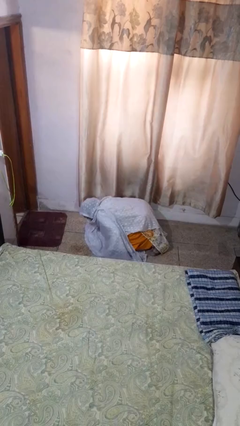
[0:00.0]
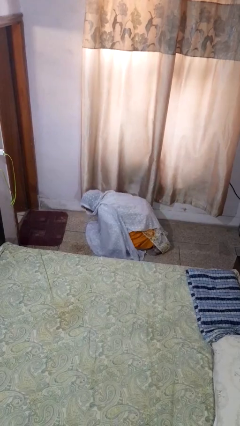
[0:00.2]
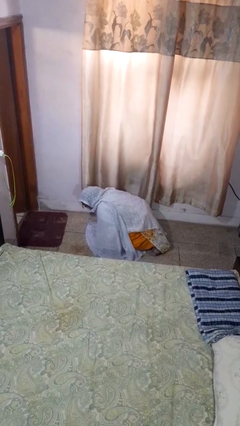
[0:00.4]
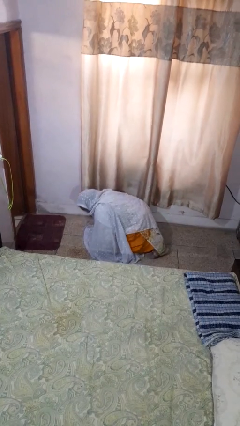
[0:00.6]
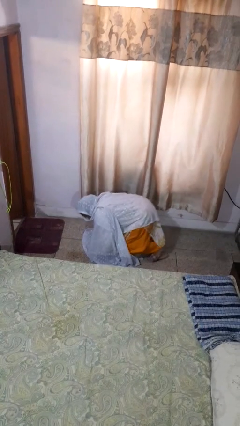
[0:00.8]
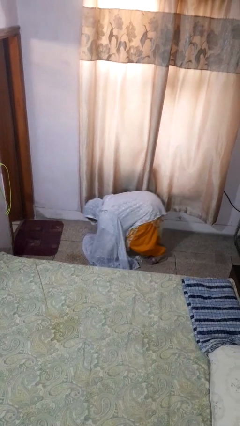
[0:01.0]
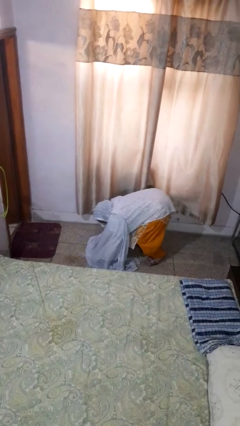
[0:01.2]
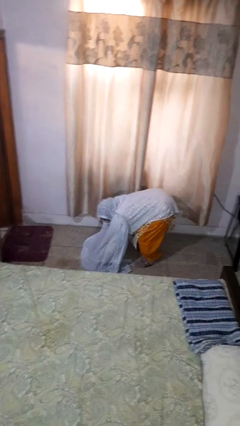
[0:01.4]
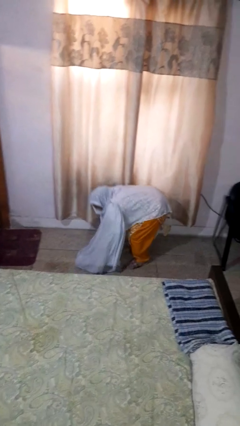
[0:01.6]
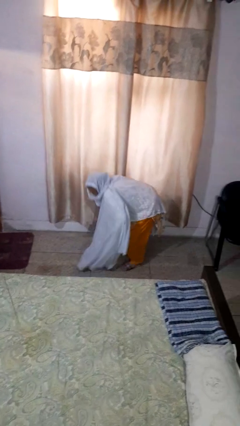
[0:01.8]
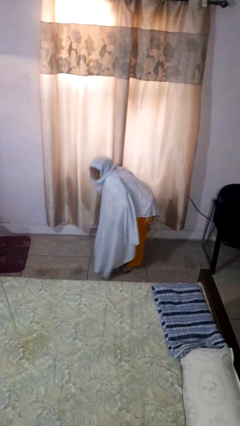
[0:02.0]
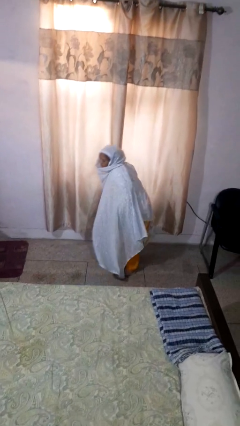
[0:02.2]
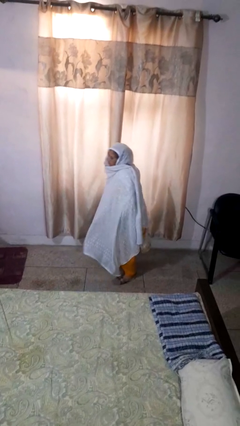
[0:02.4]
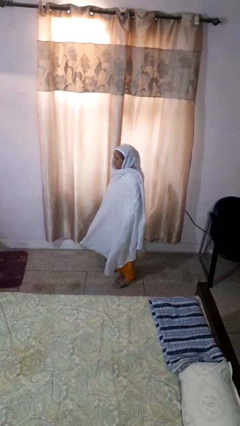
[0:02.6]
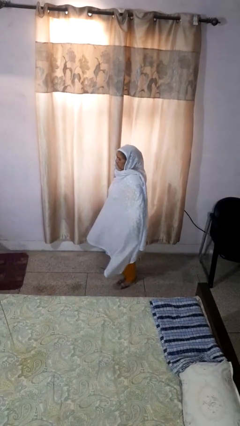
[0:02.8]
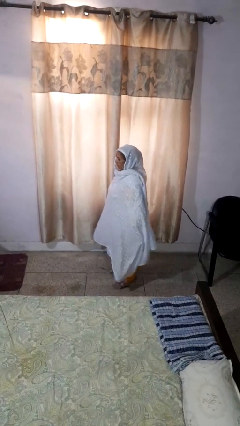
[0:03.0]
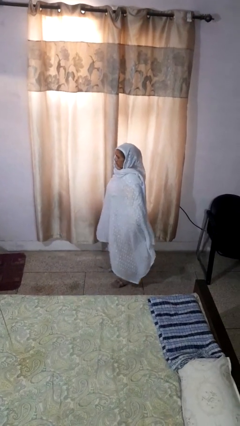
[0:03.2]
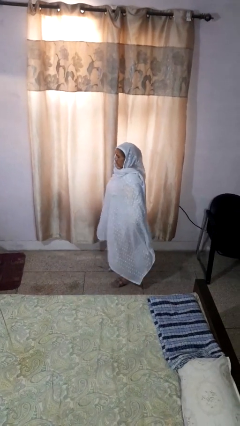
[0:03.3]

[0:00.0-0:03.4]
person stands up from floor

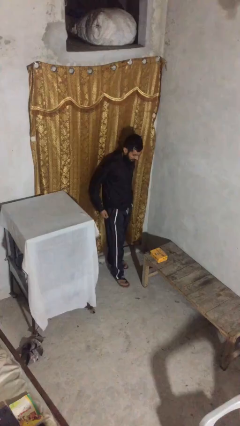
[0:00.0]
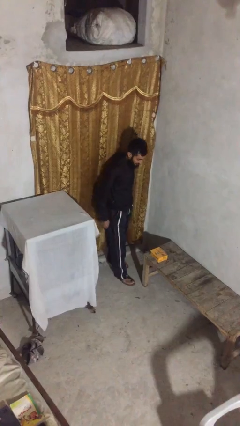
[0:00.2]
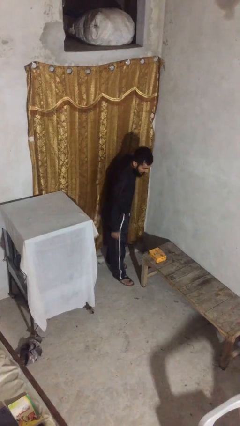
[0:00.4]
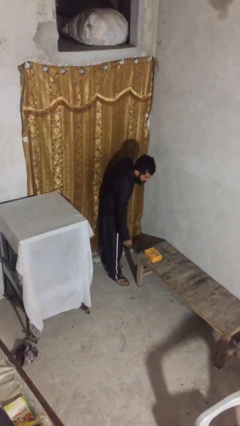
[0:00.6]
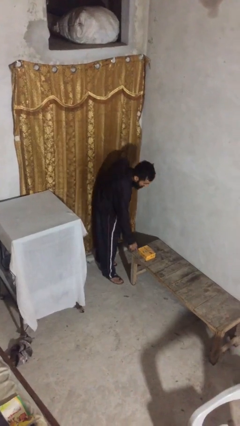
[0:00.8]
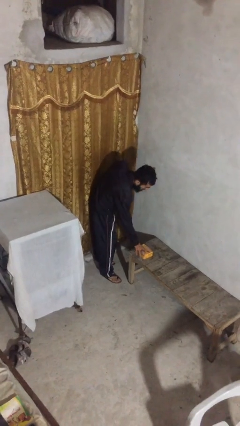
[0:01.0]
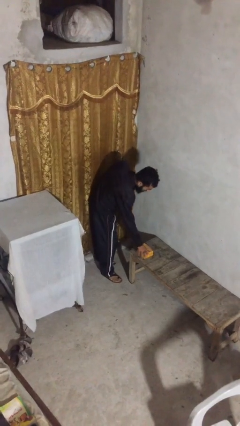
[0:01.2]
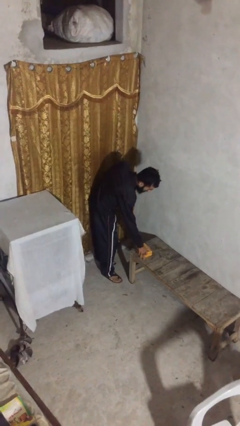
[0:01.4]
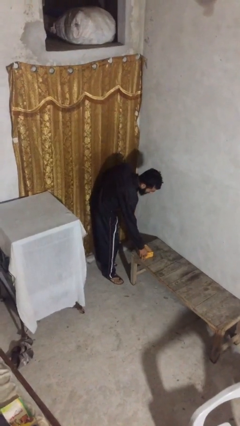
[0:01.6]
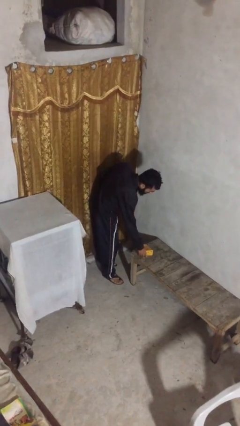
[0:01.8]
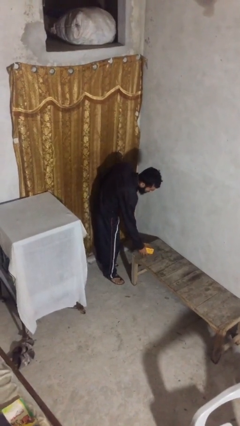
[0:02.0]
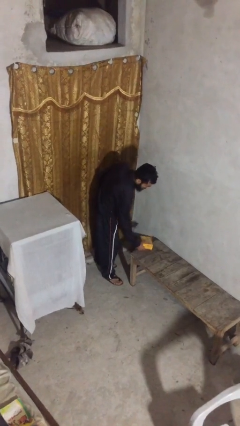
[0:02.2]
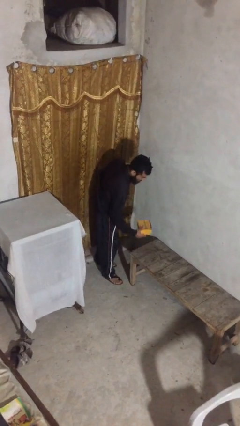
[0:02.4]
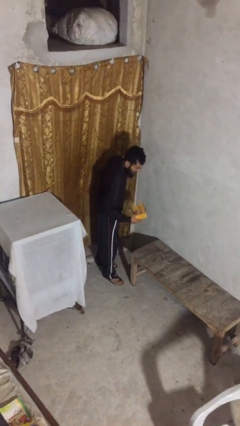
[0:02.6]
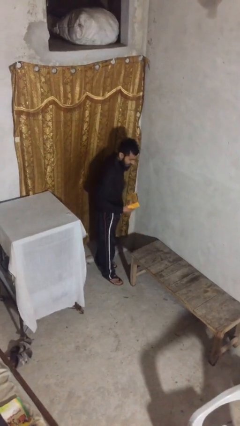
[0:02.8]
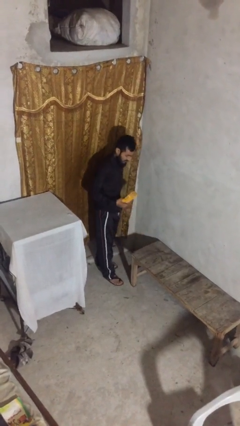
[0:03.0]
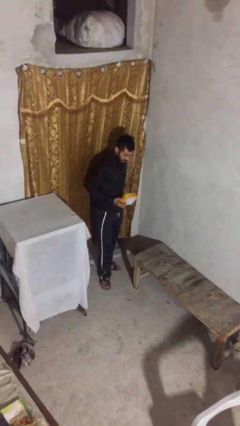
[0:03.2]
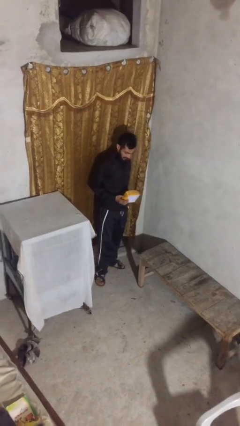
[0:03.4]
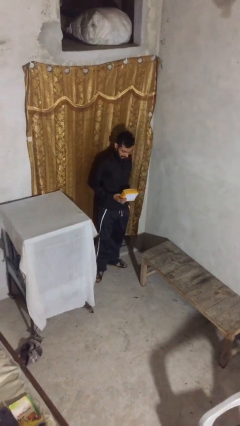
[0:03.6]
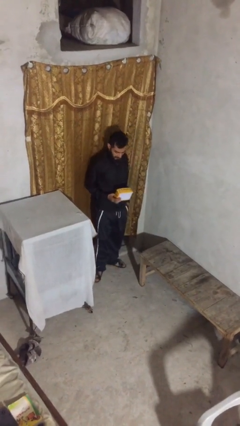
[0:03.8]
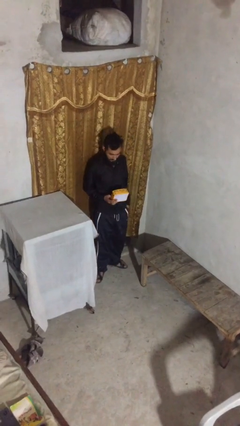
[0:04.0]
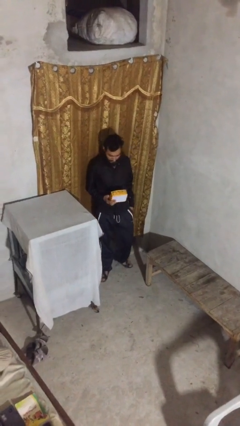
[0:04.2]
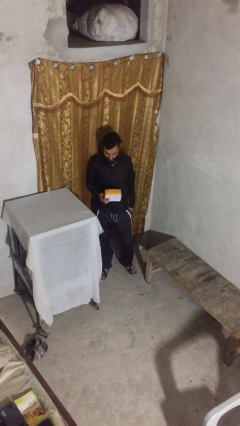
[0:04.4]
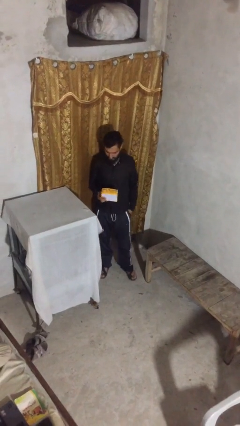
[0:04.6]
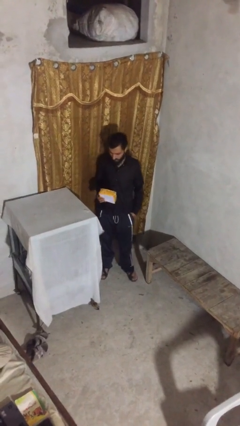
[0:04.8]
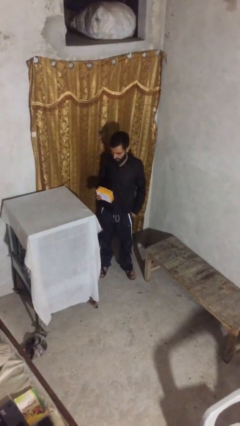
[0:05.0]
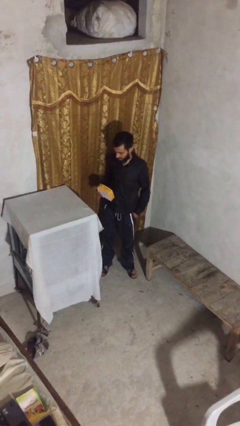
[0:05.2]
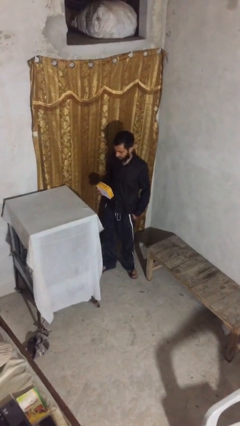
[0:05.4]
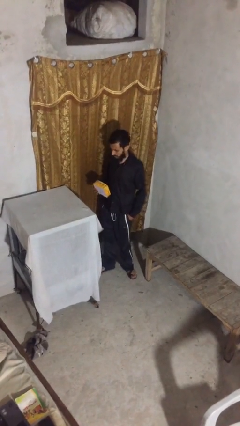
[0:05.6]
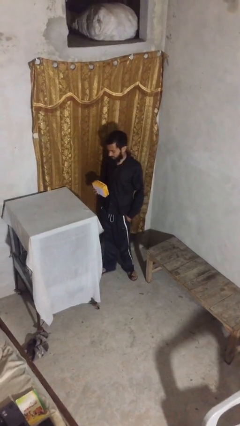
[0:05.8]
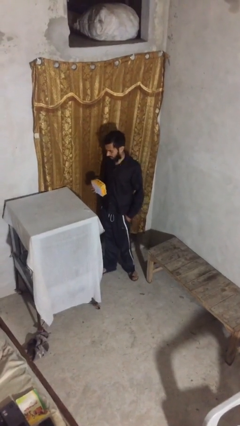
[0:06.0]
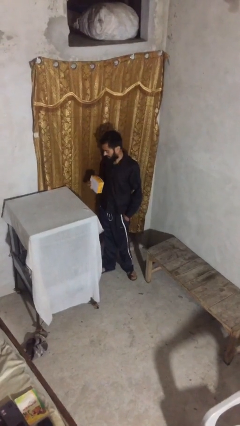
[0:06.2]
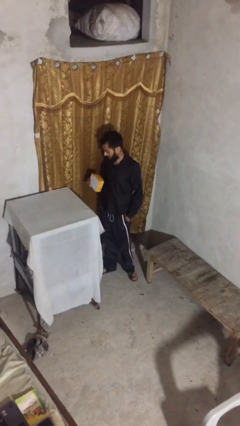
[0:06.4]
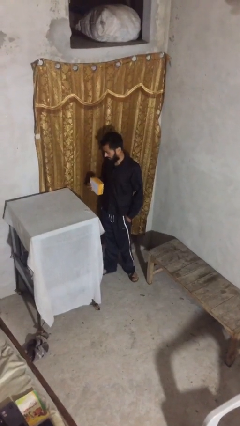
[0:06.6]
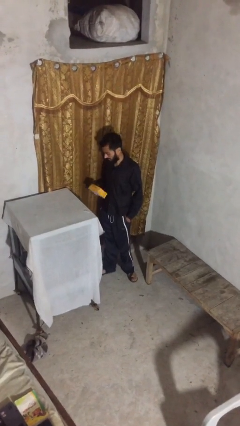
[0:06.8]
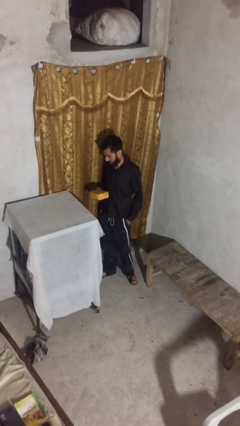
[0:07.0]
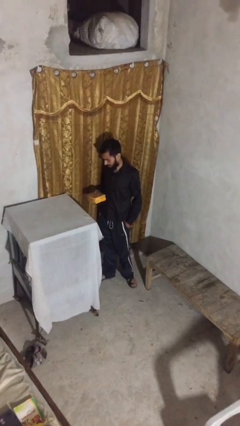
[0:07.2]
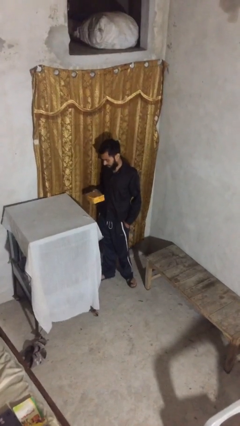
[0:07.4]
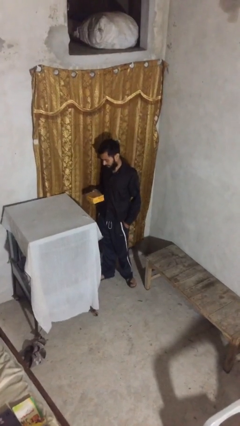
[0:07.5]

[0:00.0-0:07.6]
person picks up object from table

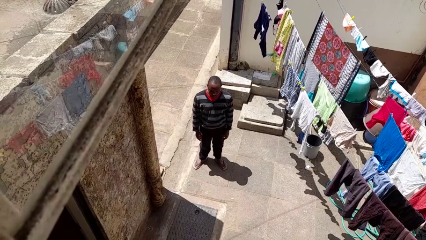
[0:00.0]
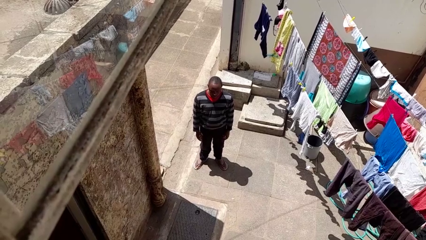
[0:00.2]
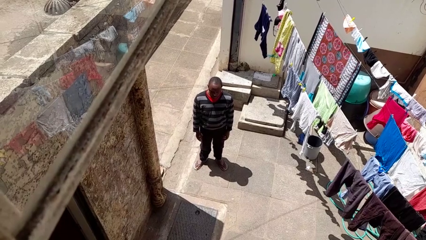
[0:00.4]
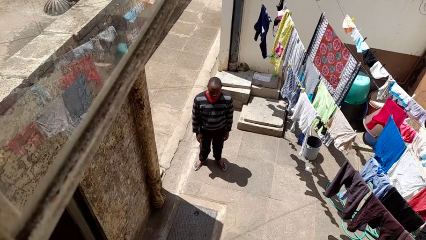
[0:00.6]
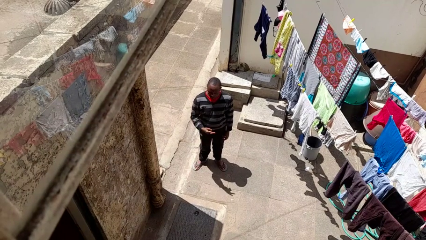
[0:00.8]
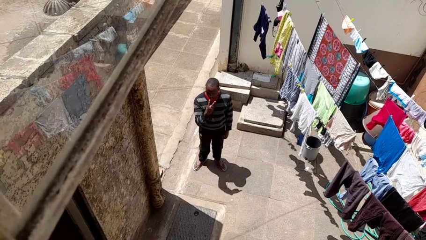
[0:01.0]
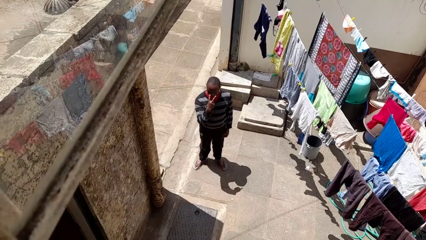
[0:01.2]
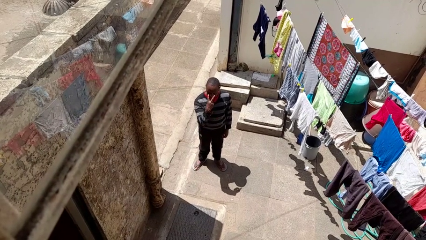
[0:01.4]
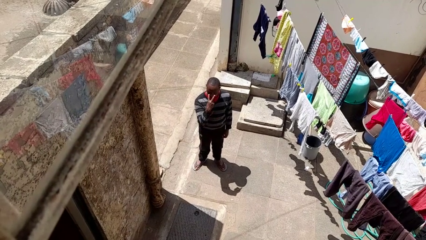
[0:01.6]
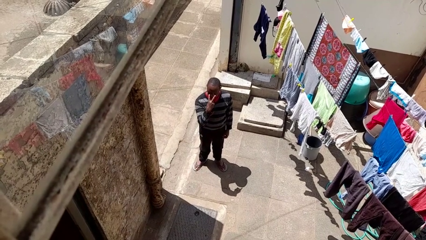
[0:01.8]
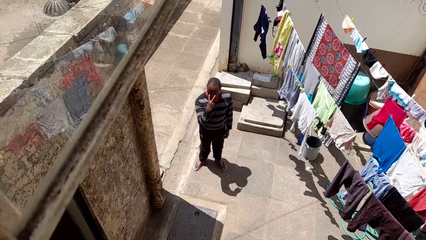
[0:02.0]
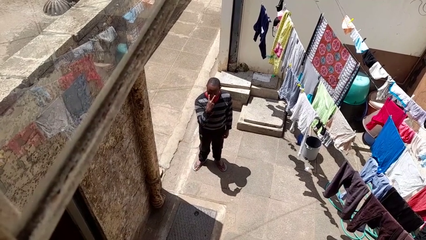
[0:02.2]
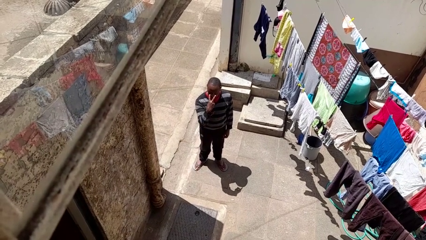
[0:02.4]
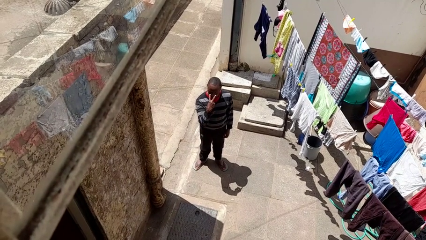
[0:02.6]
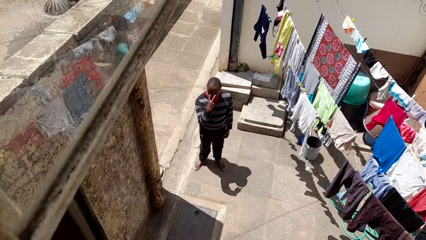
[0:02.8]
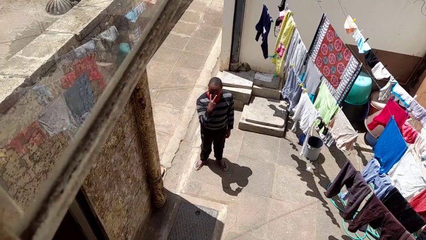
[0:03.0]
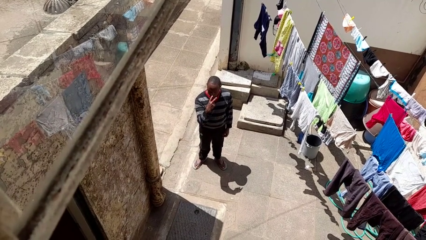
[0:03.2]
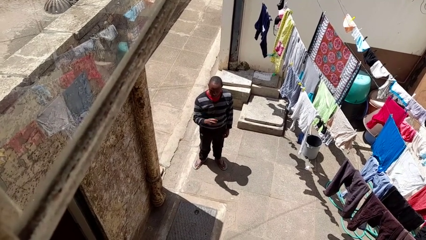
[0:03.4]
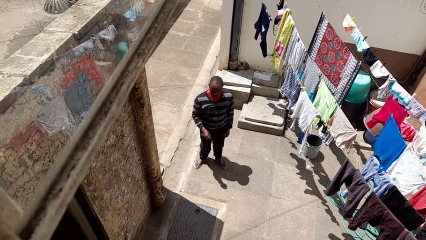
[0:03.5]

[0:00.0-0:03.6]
person gestures watch closely

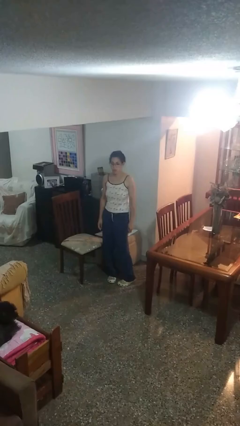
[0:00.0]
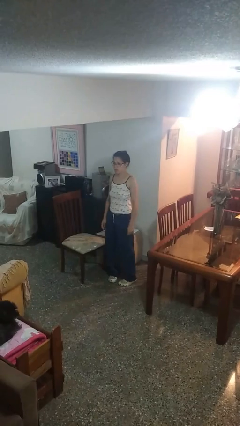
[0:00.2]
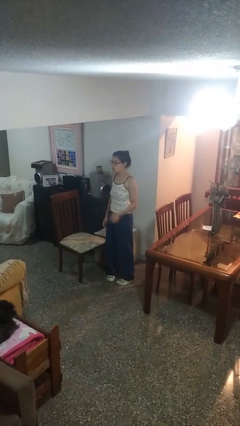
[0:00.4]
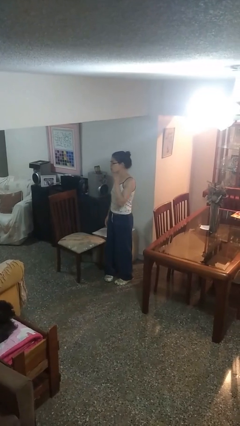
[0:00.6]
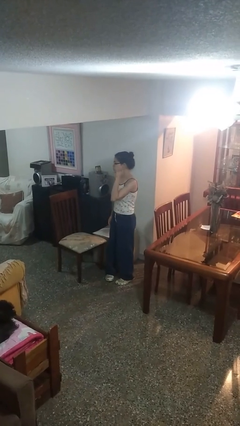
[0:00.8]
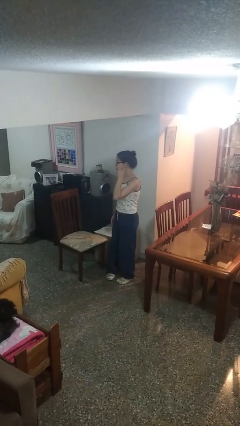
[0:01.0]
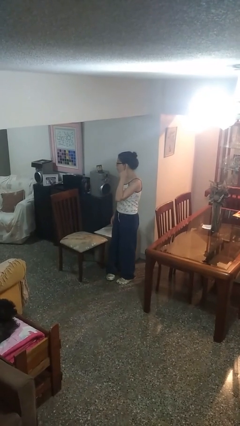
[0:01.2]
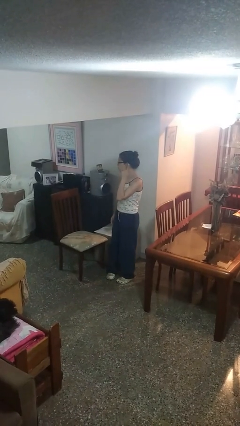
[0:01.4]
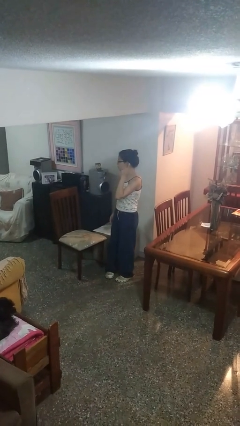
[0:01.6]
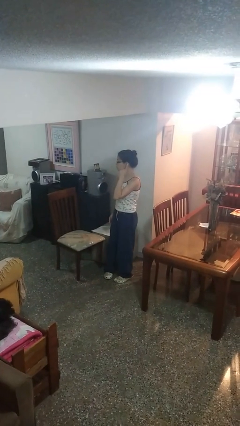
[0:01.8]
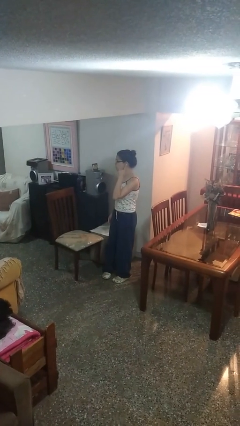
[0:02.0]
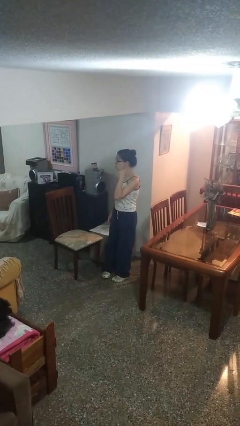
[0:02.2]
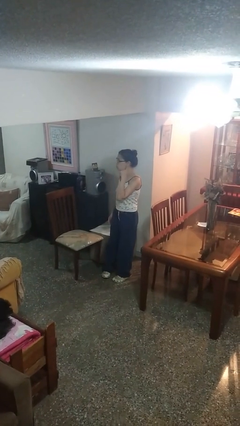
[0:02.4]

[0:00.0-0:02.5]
person gestures listen closely

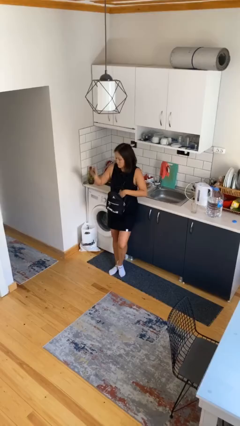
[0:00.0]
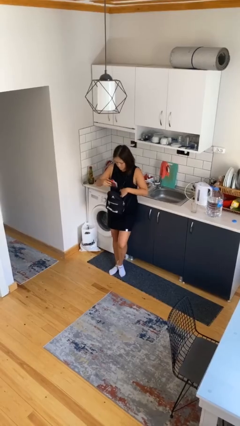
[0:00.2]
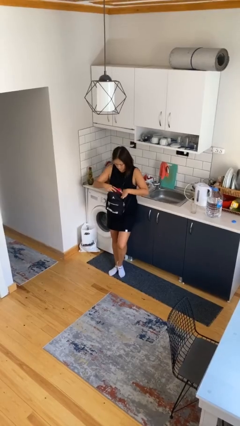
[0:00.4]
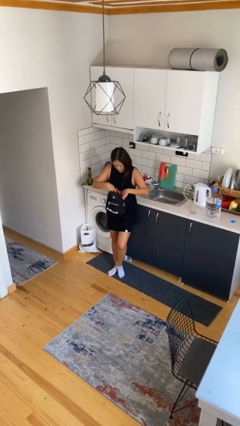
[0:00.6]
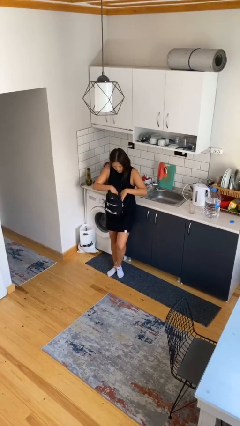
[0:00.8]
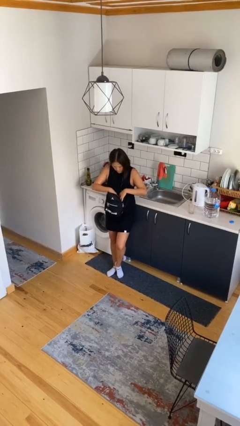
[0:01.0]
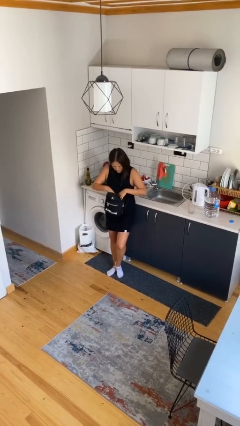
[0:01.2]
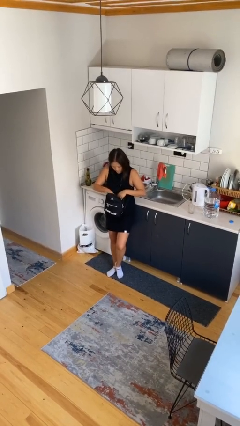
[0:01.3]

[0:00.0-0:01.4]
person puts object into backpack
